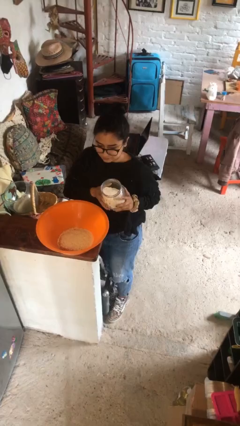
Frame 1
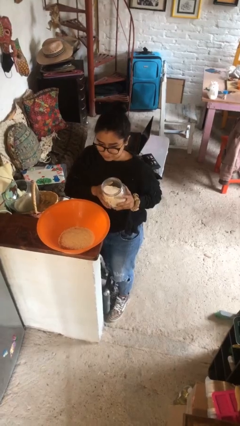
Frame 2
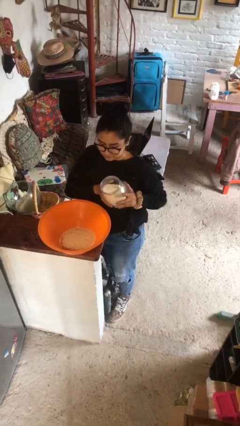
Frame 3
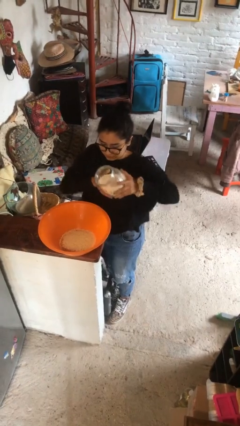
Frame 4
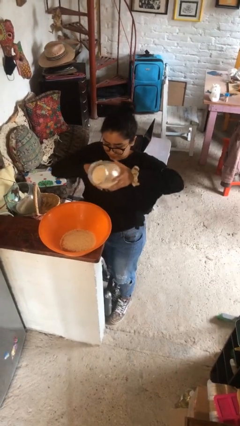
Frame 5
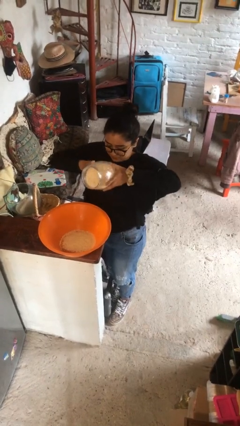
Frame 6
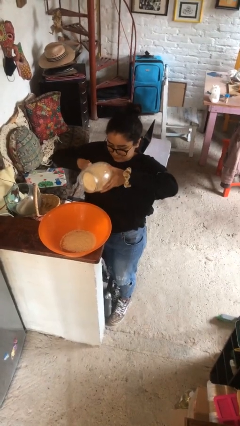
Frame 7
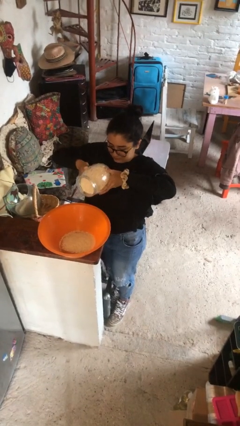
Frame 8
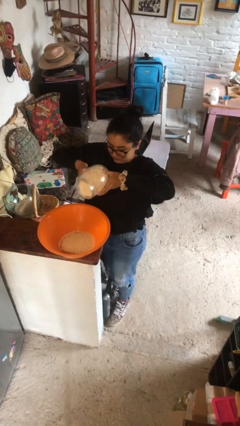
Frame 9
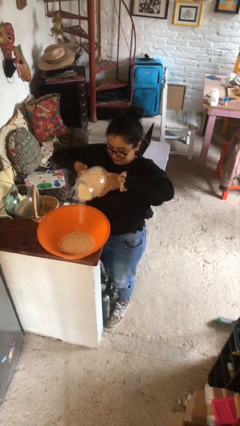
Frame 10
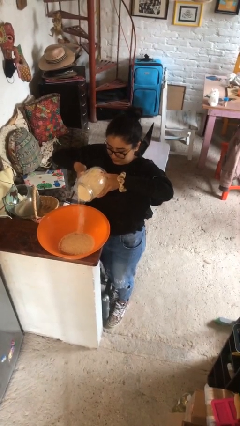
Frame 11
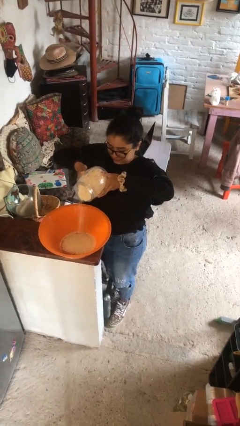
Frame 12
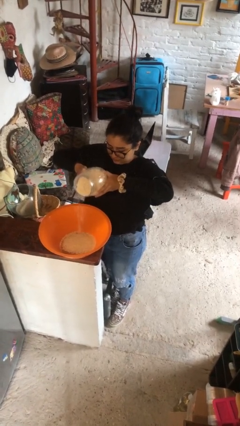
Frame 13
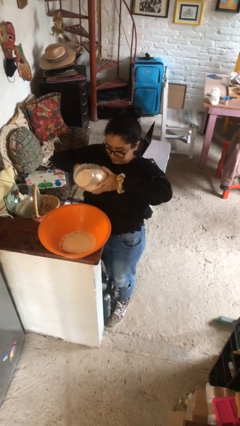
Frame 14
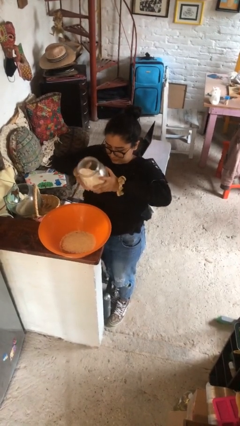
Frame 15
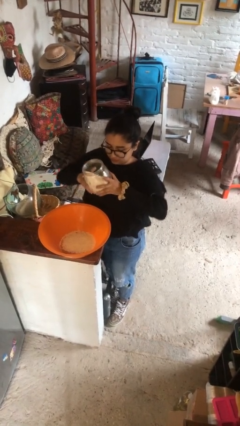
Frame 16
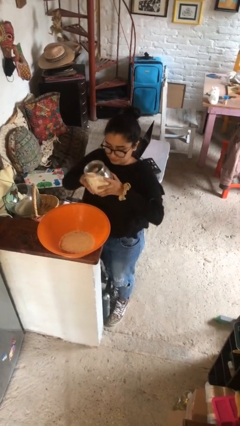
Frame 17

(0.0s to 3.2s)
person pours into bowl

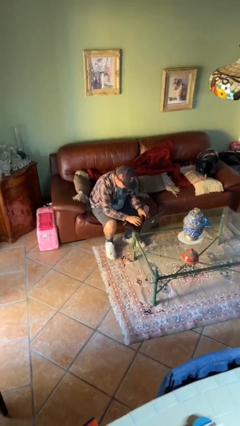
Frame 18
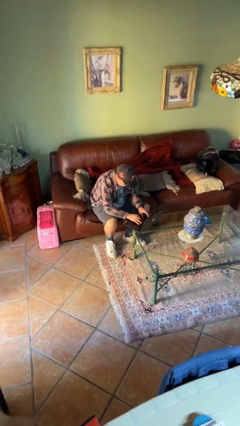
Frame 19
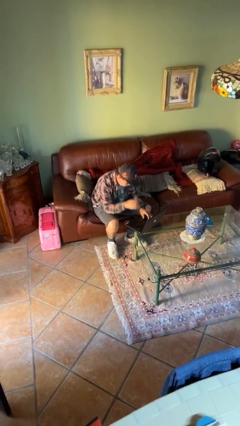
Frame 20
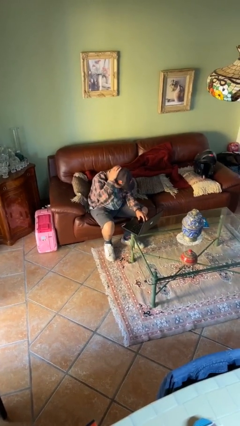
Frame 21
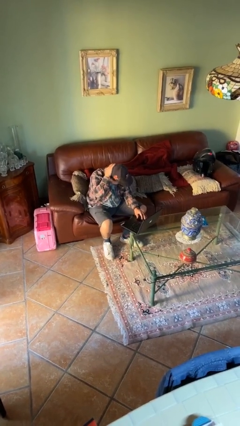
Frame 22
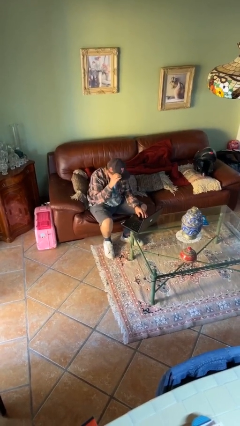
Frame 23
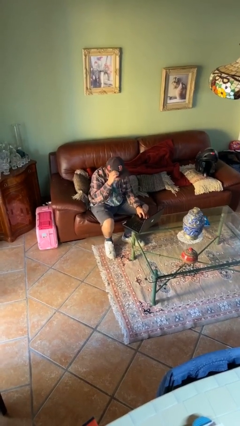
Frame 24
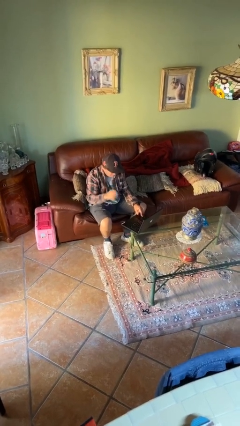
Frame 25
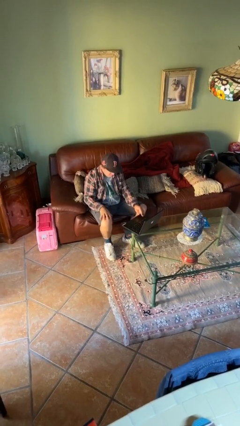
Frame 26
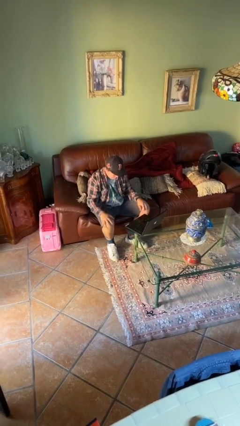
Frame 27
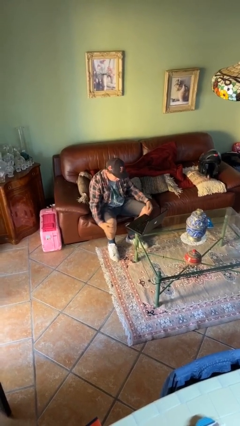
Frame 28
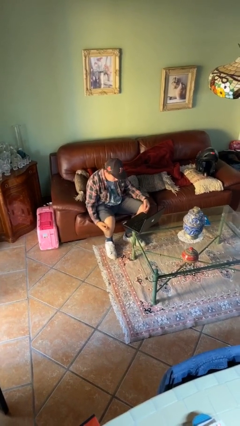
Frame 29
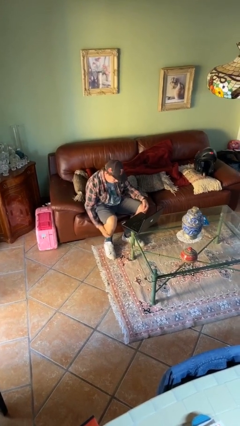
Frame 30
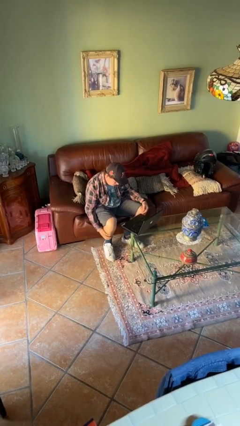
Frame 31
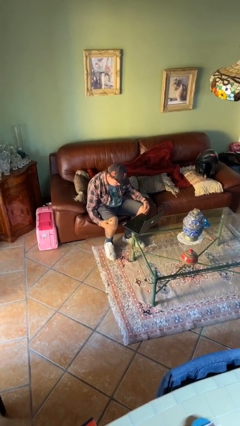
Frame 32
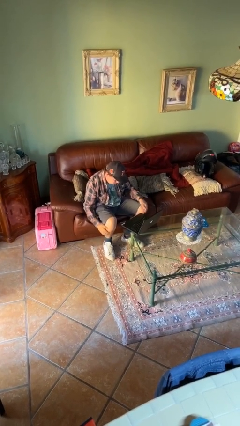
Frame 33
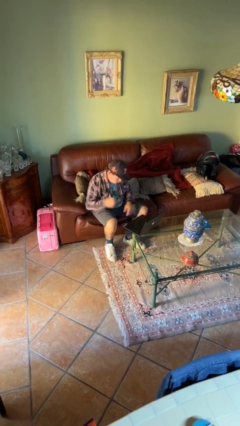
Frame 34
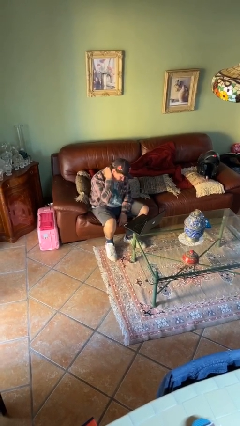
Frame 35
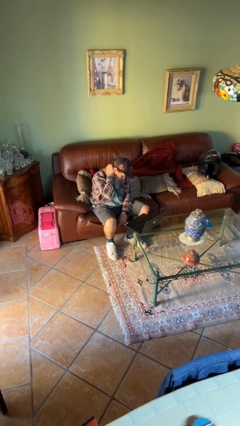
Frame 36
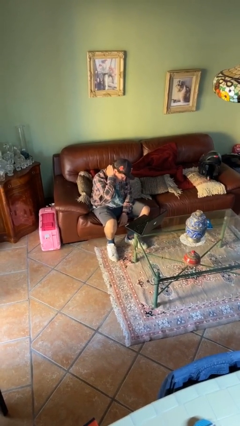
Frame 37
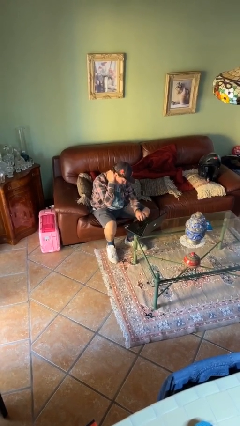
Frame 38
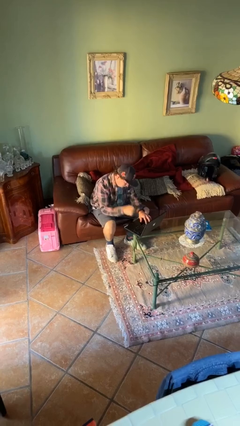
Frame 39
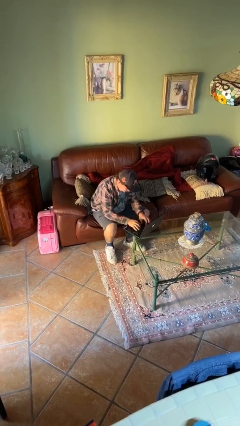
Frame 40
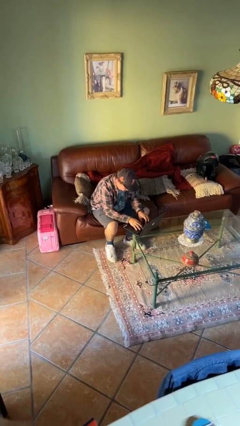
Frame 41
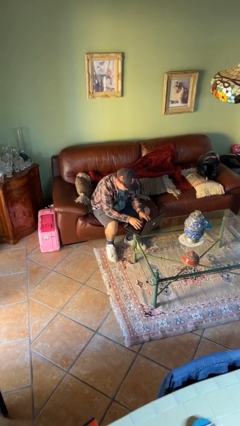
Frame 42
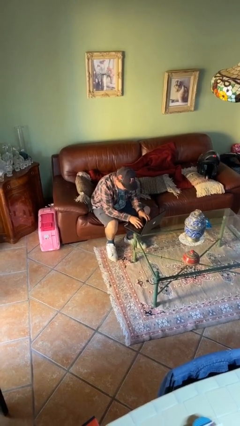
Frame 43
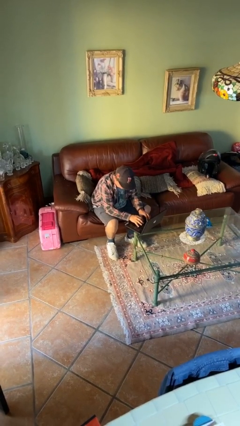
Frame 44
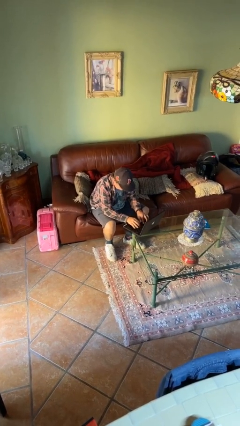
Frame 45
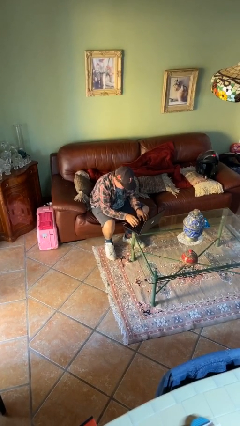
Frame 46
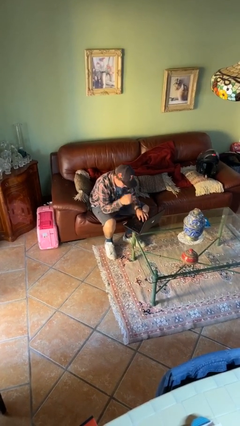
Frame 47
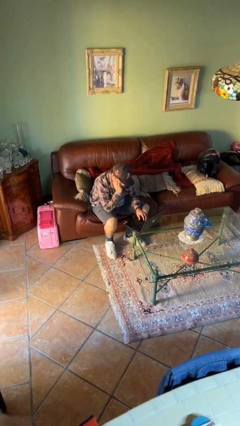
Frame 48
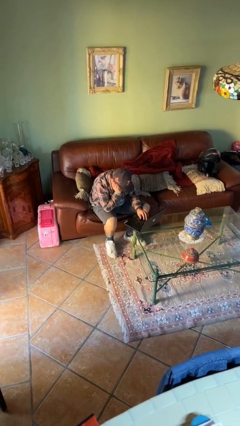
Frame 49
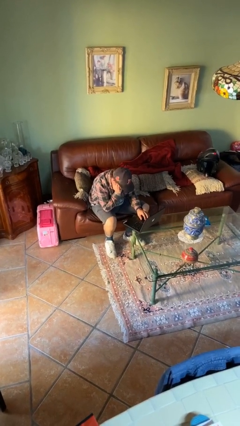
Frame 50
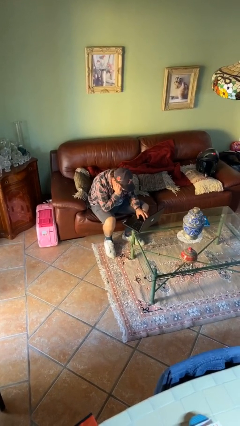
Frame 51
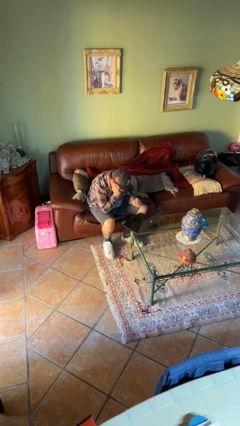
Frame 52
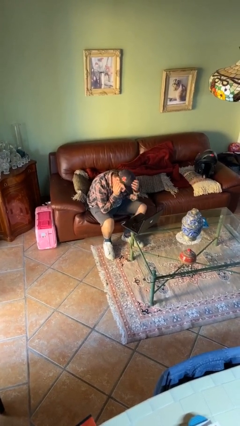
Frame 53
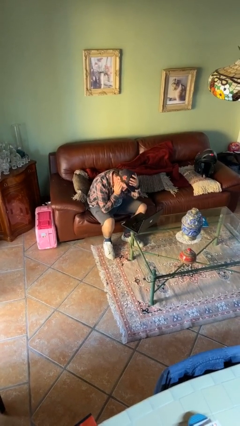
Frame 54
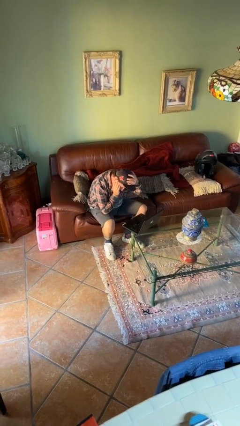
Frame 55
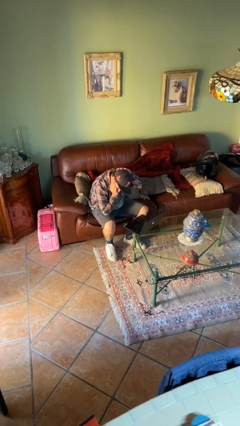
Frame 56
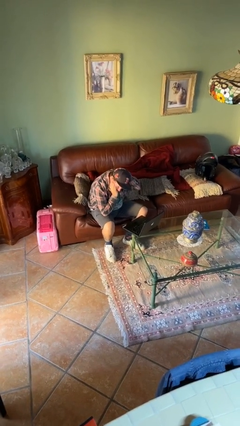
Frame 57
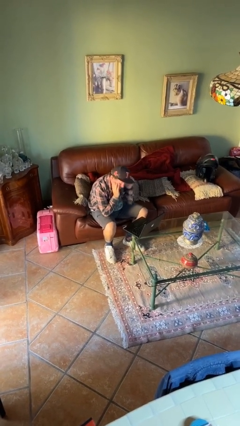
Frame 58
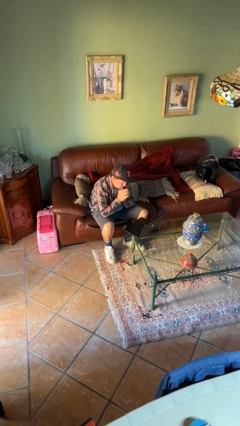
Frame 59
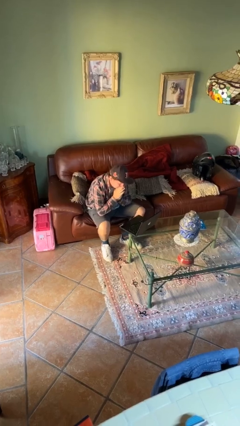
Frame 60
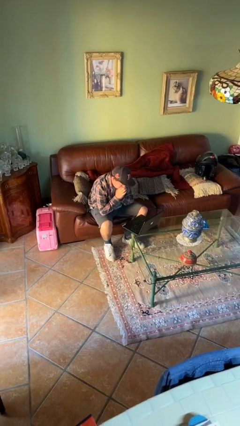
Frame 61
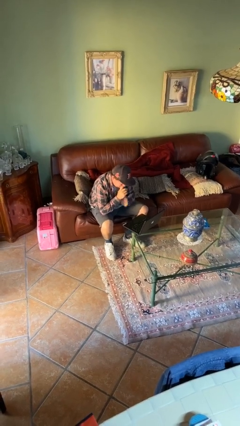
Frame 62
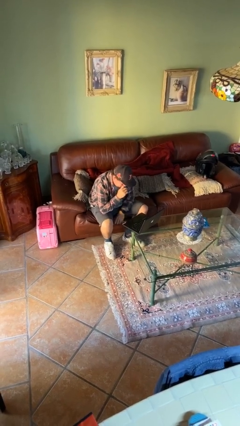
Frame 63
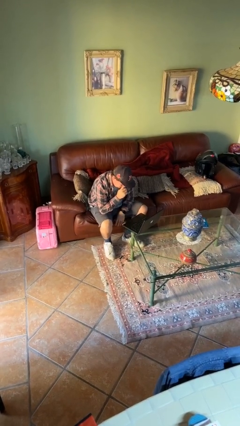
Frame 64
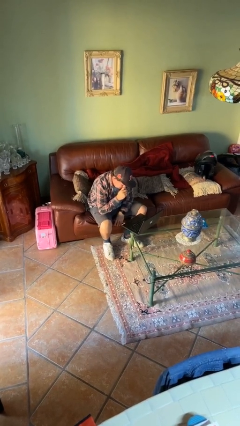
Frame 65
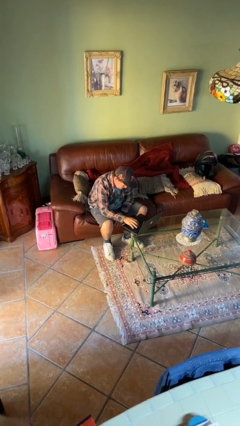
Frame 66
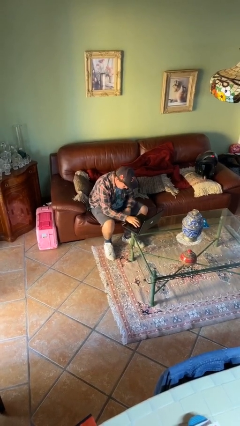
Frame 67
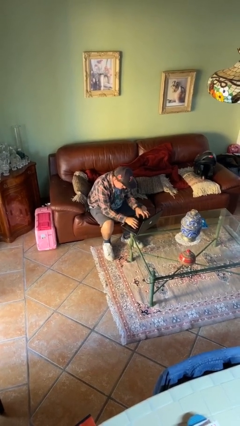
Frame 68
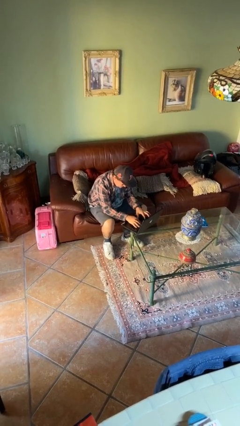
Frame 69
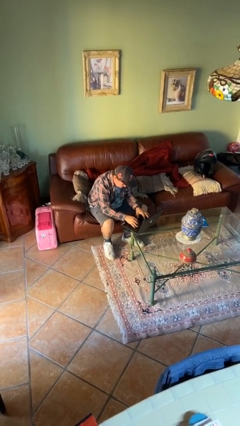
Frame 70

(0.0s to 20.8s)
person interacts with laptop

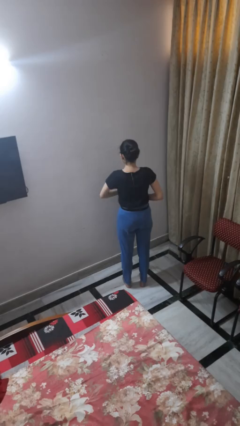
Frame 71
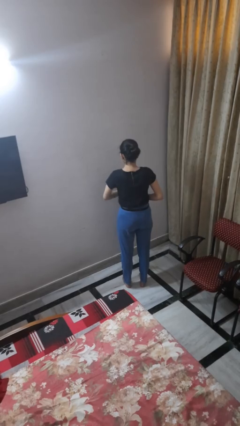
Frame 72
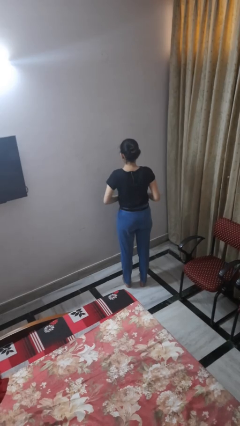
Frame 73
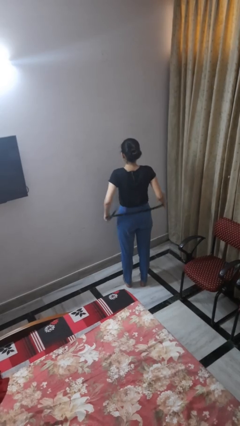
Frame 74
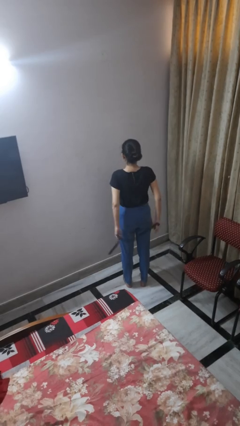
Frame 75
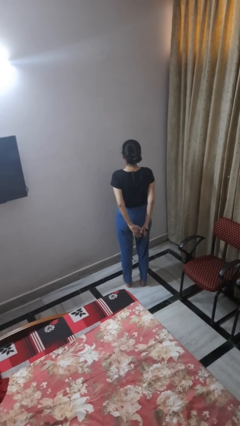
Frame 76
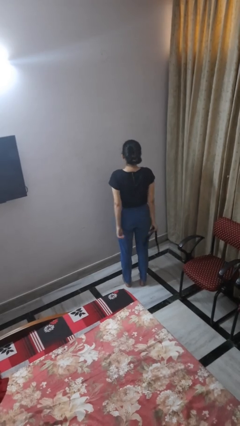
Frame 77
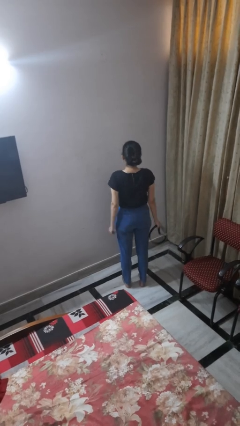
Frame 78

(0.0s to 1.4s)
person takes off belt

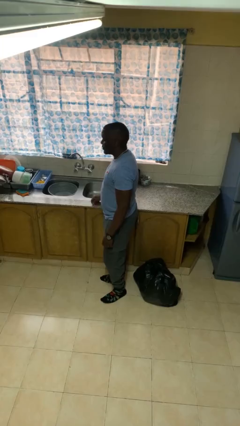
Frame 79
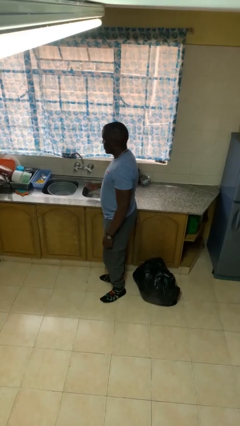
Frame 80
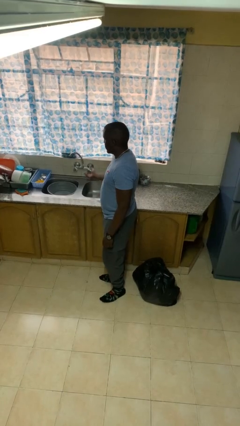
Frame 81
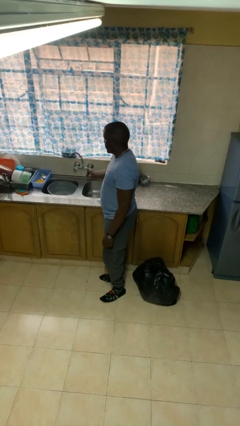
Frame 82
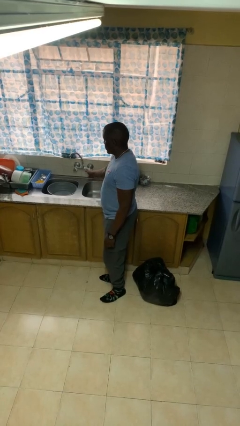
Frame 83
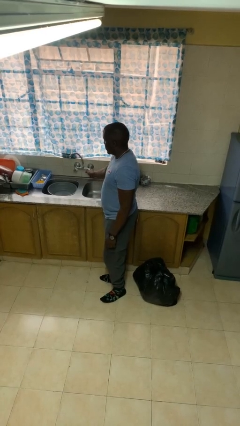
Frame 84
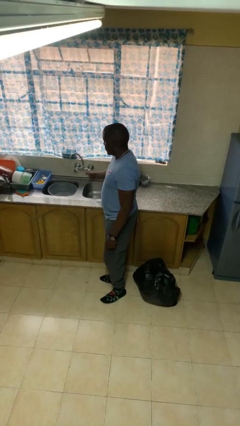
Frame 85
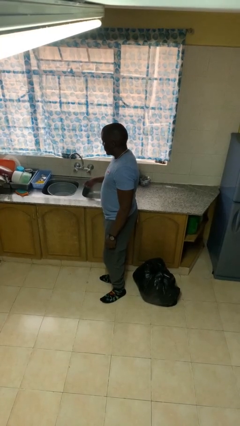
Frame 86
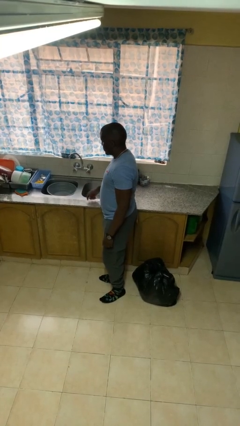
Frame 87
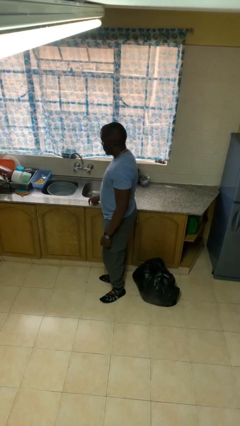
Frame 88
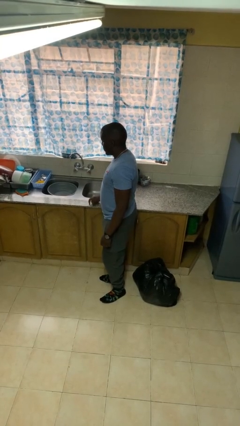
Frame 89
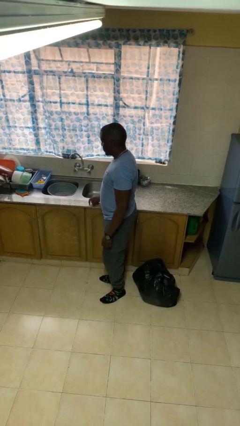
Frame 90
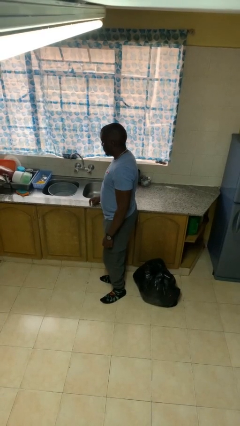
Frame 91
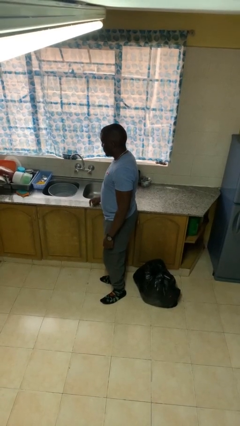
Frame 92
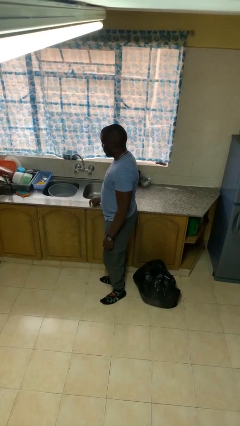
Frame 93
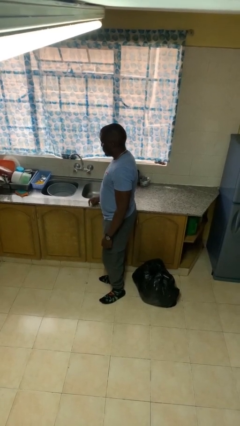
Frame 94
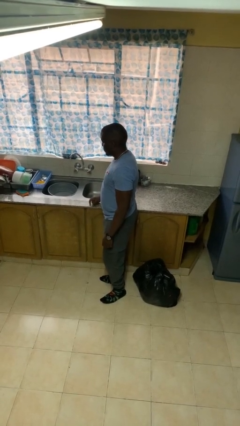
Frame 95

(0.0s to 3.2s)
person turns on faucet
